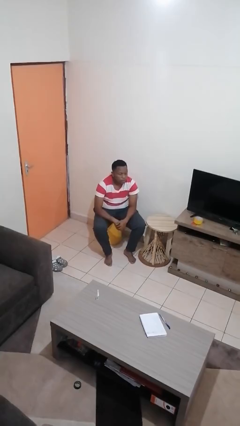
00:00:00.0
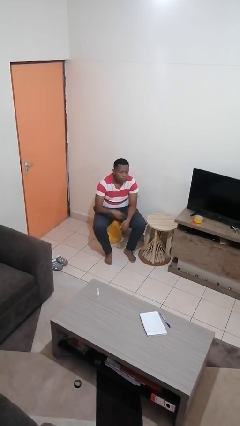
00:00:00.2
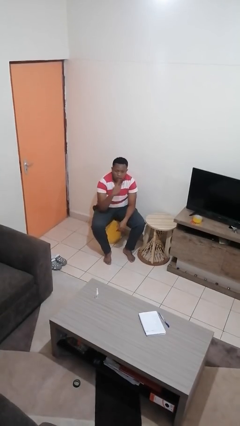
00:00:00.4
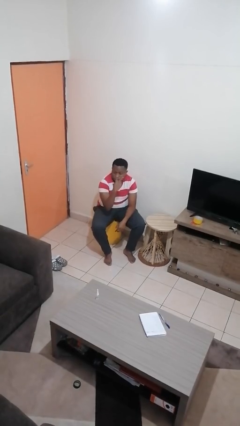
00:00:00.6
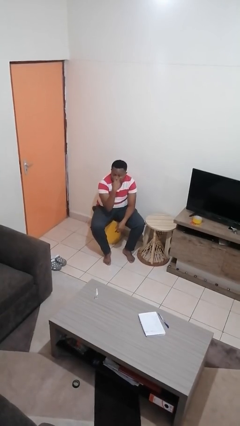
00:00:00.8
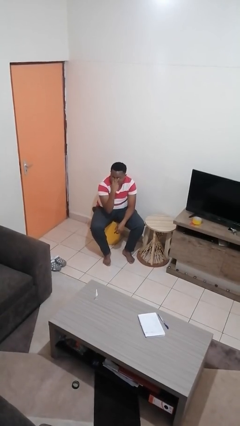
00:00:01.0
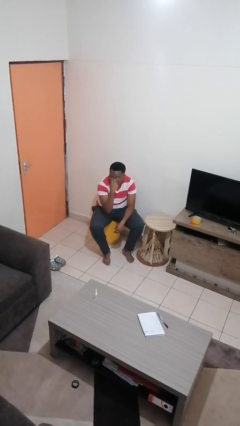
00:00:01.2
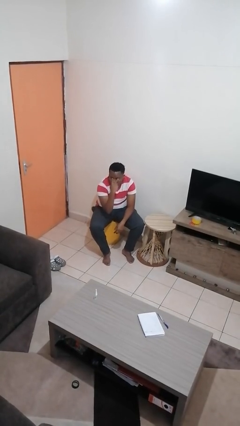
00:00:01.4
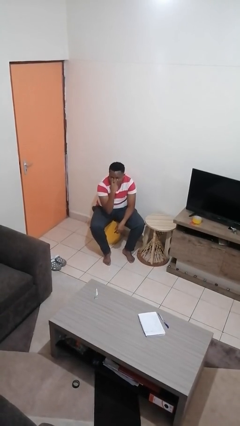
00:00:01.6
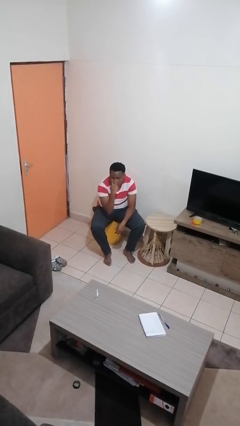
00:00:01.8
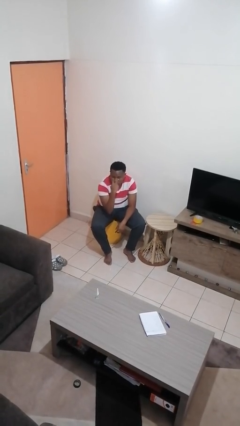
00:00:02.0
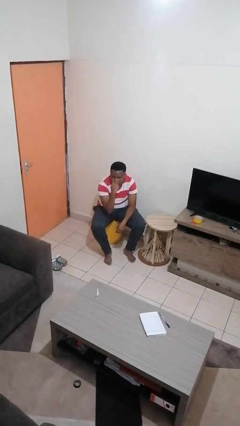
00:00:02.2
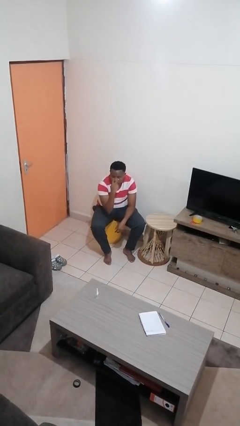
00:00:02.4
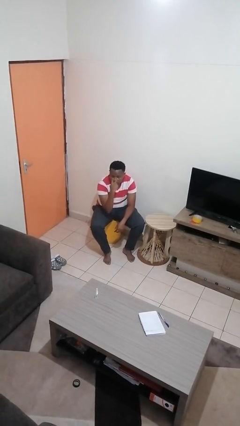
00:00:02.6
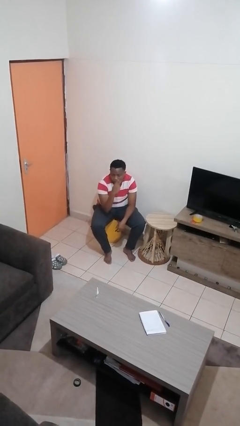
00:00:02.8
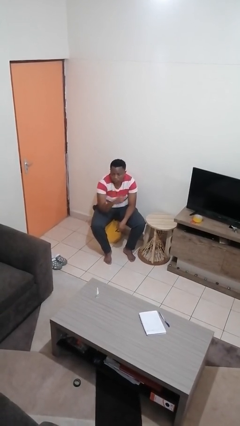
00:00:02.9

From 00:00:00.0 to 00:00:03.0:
person gestures watch closely

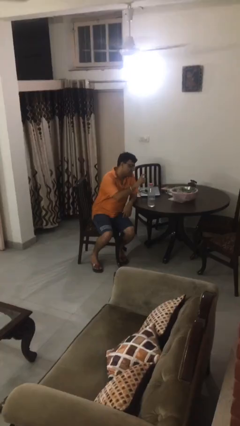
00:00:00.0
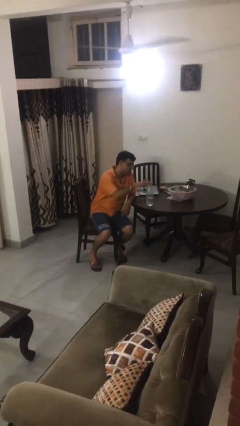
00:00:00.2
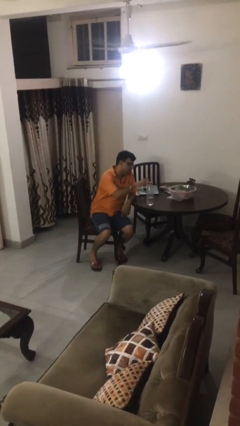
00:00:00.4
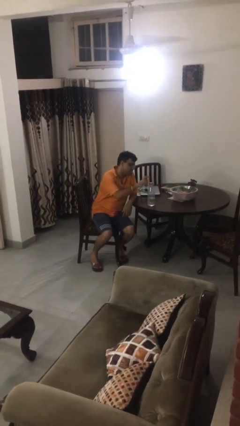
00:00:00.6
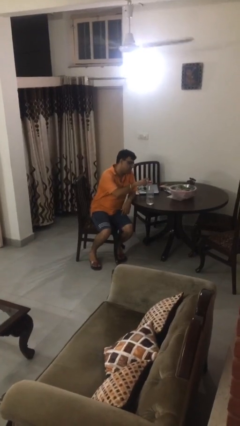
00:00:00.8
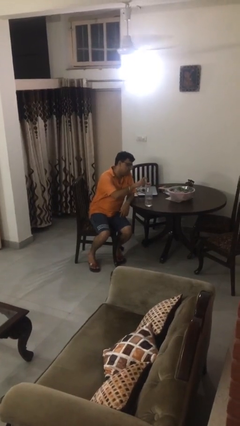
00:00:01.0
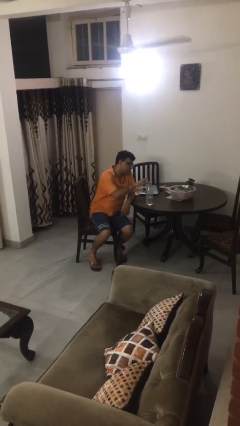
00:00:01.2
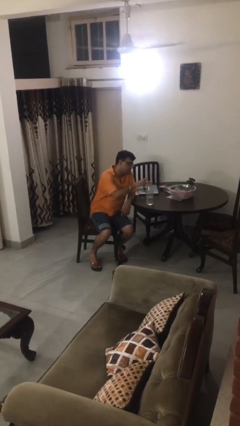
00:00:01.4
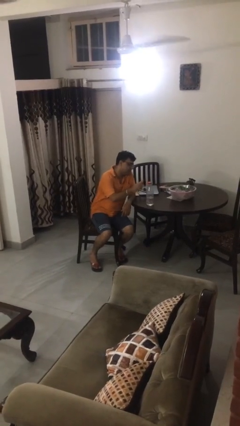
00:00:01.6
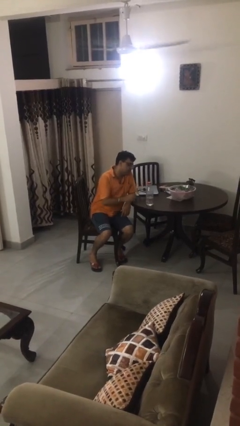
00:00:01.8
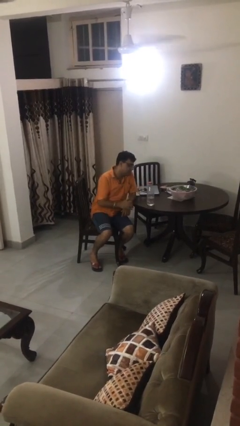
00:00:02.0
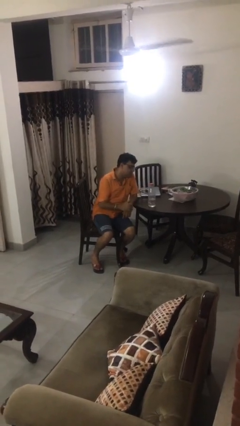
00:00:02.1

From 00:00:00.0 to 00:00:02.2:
person taps object with finger

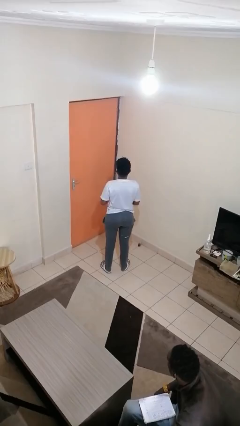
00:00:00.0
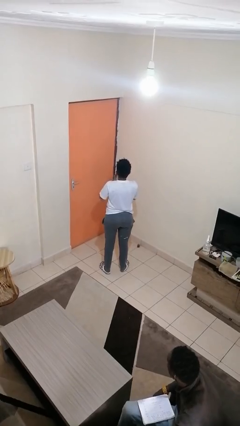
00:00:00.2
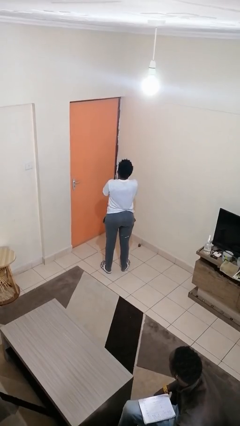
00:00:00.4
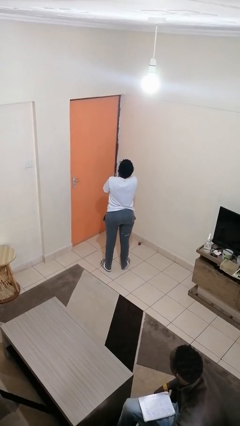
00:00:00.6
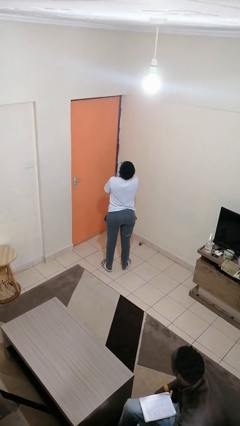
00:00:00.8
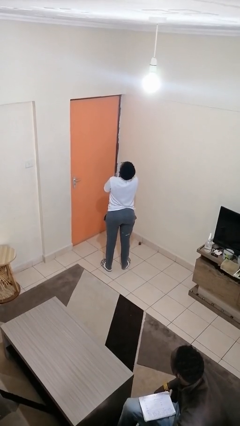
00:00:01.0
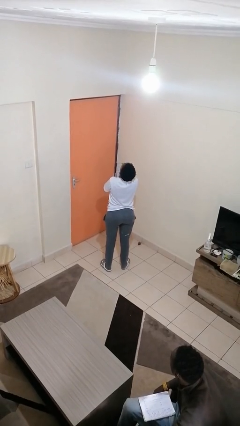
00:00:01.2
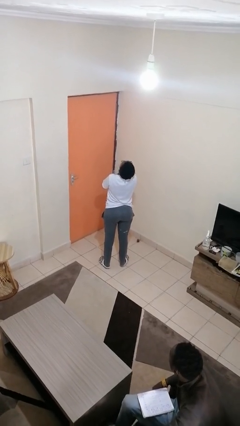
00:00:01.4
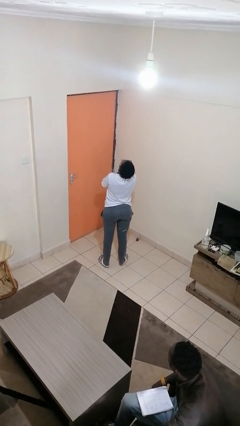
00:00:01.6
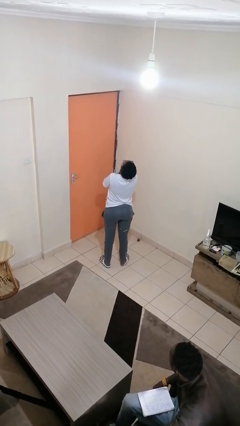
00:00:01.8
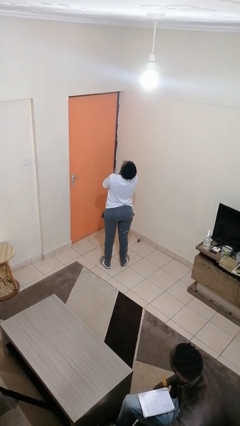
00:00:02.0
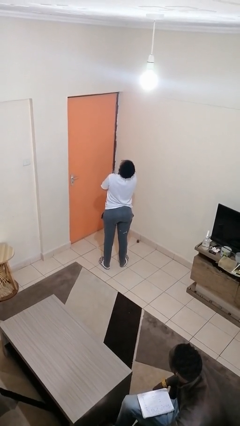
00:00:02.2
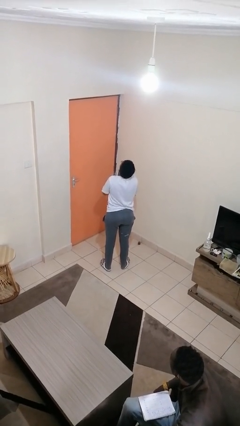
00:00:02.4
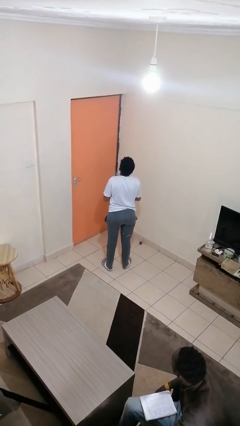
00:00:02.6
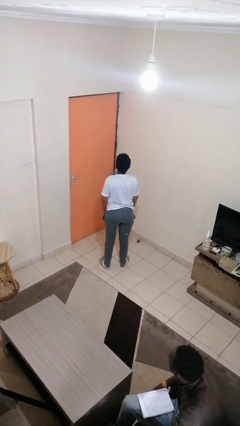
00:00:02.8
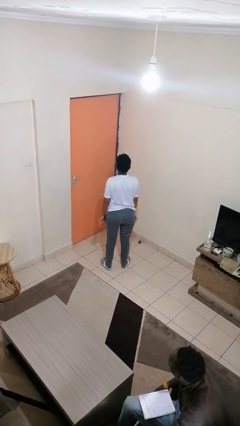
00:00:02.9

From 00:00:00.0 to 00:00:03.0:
person yawns

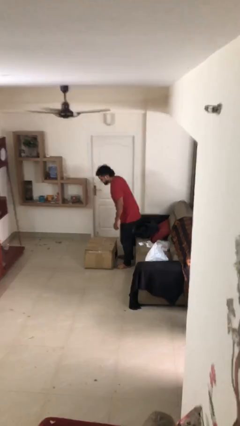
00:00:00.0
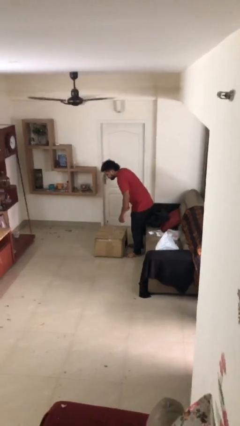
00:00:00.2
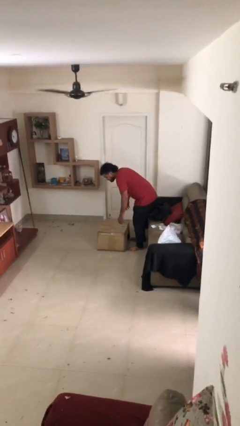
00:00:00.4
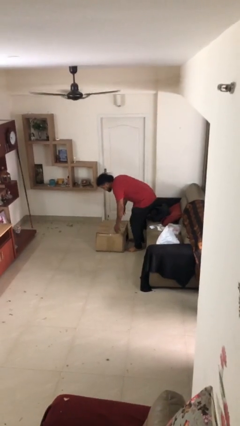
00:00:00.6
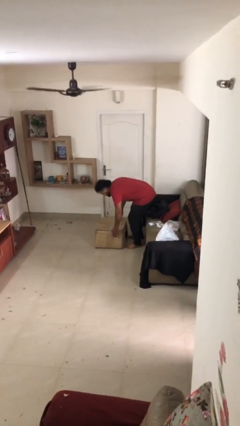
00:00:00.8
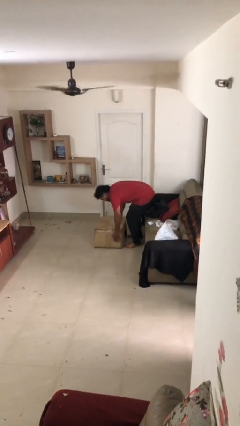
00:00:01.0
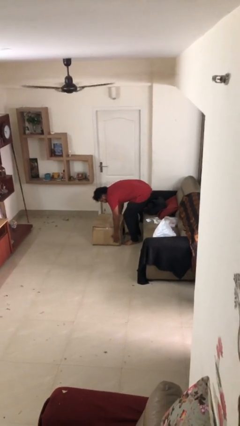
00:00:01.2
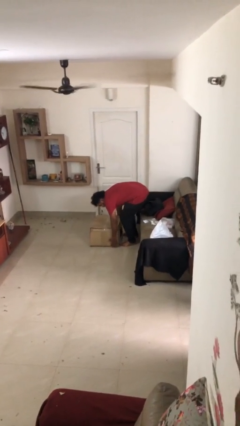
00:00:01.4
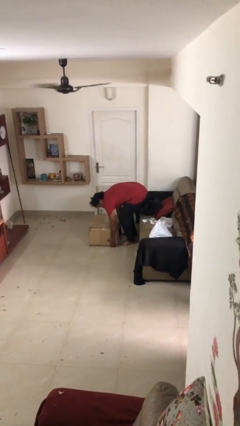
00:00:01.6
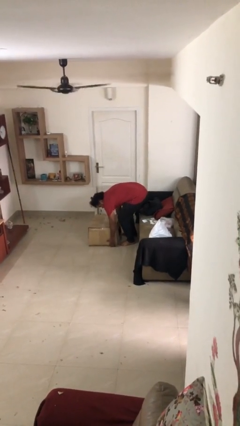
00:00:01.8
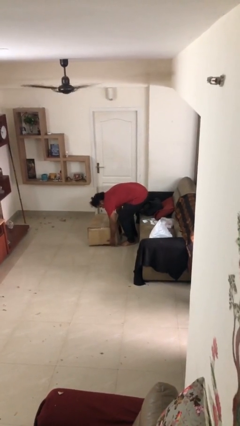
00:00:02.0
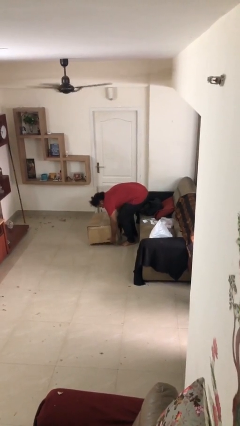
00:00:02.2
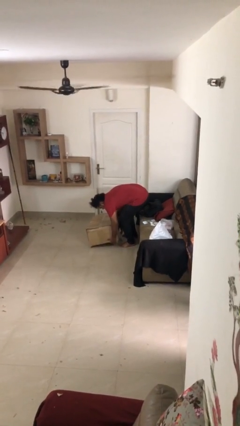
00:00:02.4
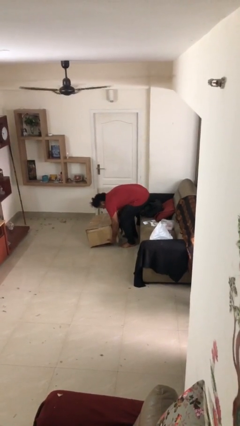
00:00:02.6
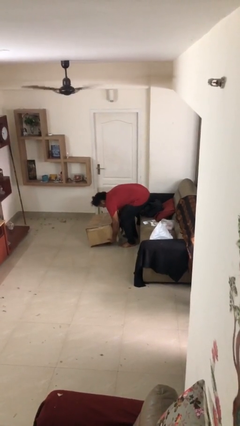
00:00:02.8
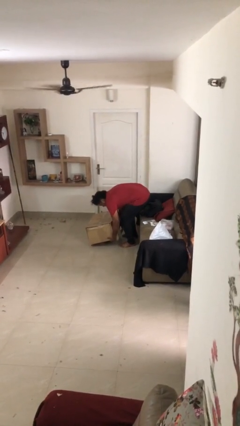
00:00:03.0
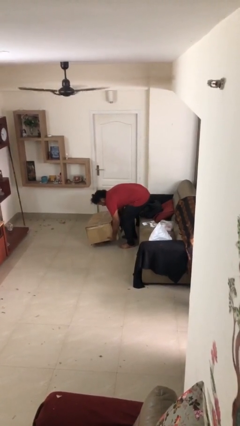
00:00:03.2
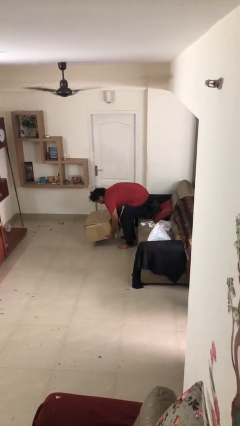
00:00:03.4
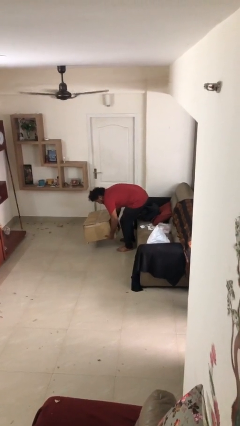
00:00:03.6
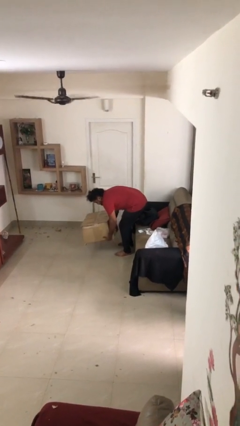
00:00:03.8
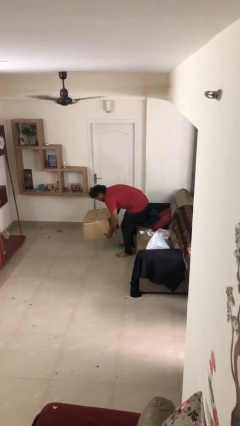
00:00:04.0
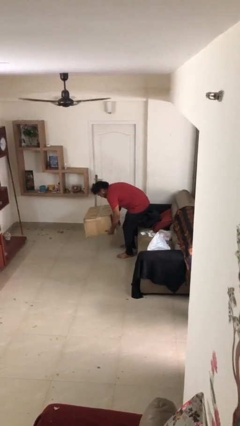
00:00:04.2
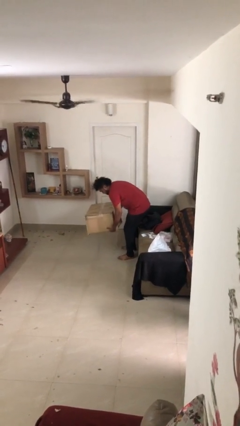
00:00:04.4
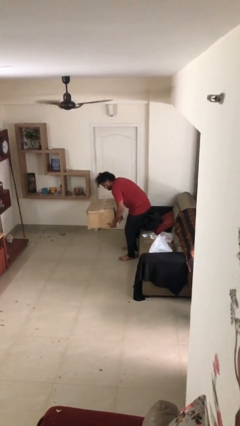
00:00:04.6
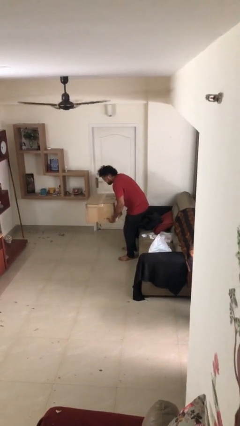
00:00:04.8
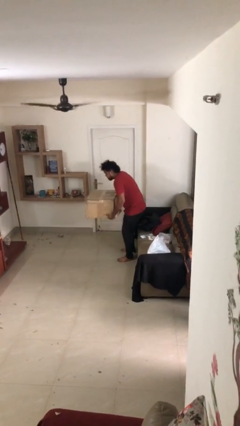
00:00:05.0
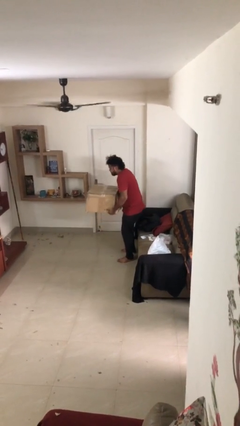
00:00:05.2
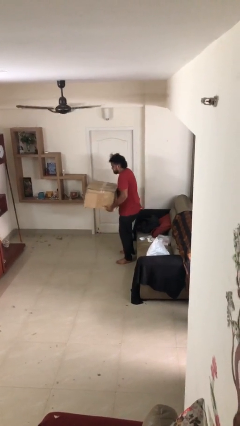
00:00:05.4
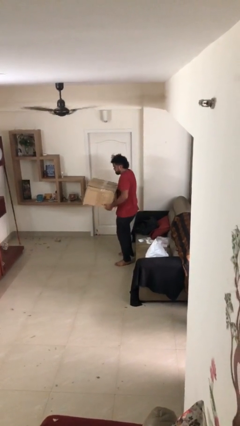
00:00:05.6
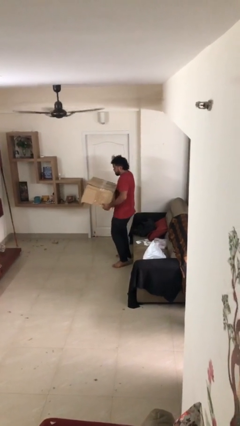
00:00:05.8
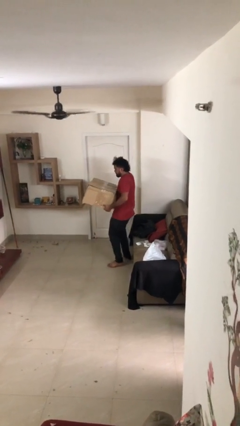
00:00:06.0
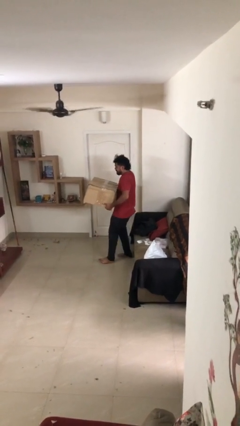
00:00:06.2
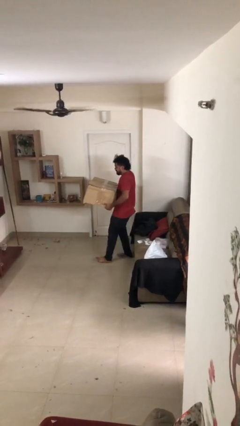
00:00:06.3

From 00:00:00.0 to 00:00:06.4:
person picks up object from floor

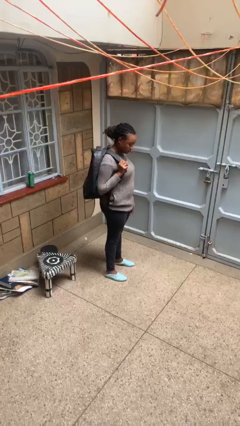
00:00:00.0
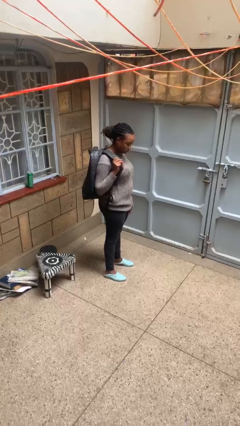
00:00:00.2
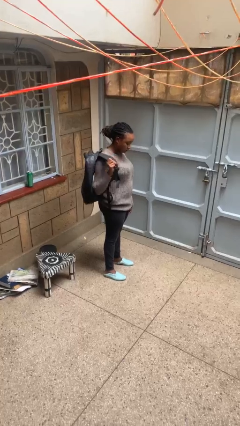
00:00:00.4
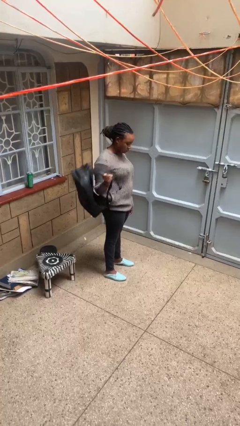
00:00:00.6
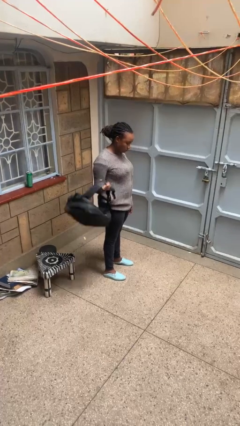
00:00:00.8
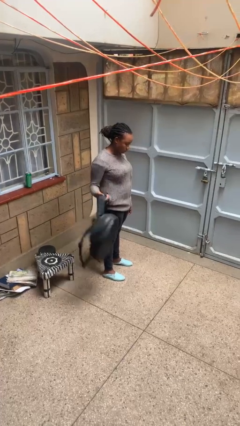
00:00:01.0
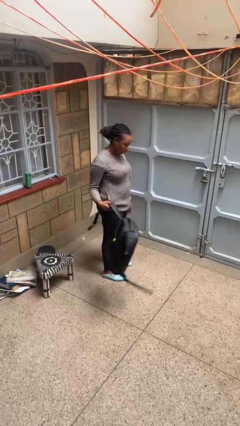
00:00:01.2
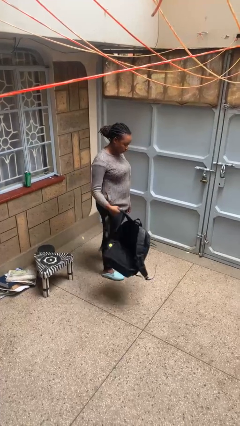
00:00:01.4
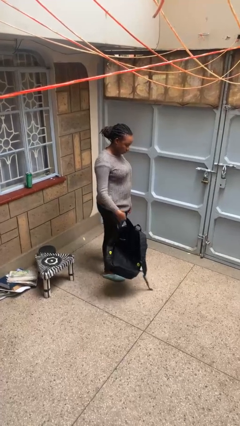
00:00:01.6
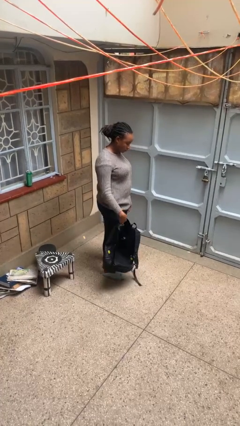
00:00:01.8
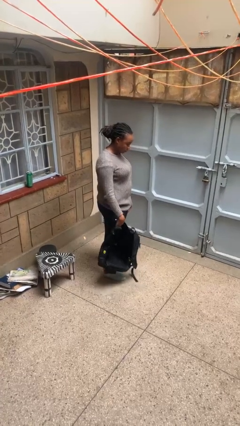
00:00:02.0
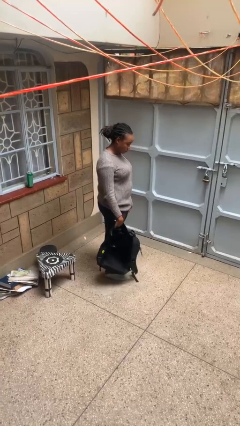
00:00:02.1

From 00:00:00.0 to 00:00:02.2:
person takes off backpack

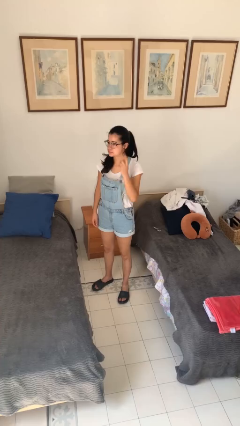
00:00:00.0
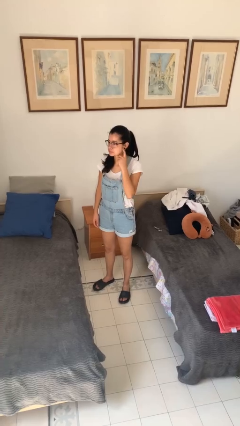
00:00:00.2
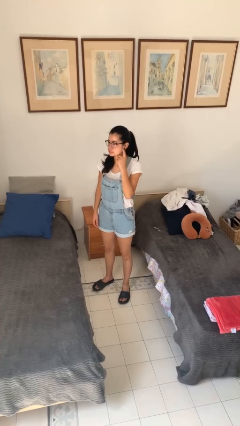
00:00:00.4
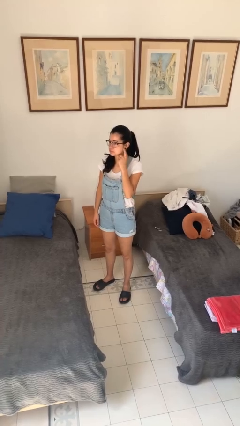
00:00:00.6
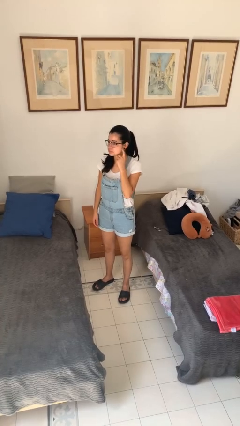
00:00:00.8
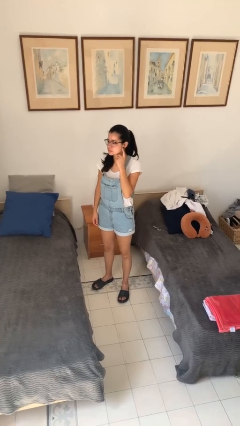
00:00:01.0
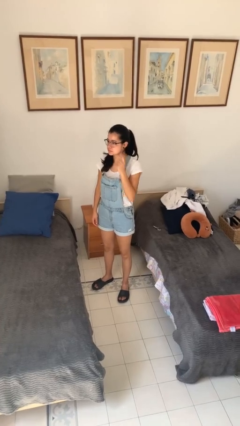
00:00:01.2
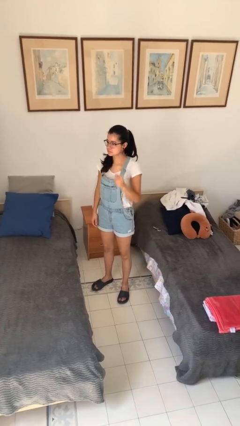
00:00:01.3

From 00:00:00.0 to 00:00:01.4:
person gestures heart
